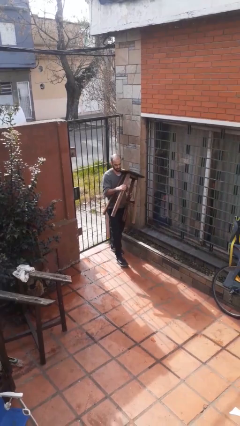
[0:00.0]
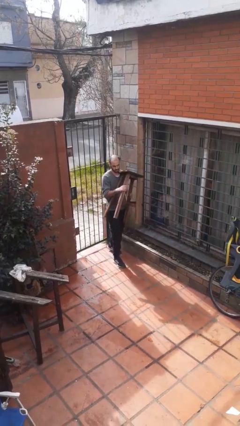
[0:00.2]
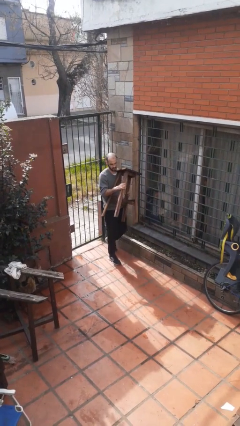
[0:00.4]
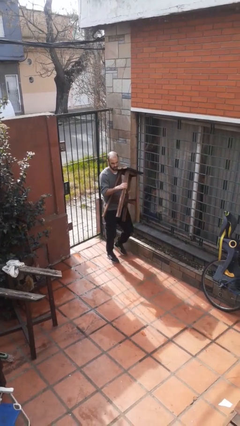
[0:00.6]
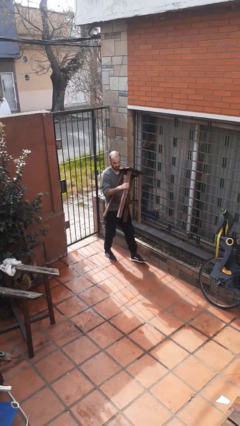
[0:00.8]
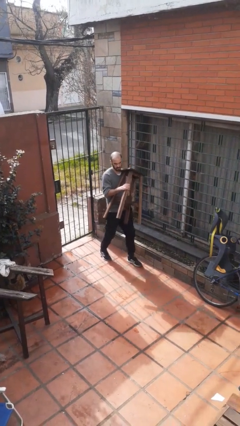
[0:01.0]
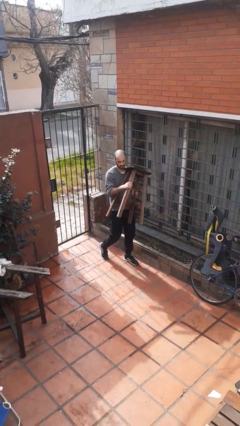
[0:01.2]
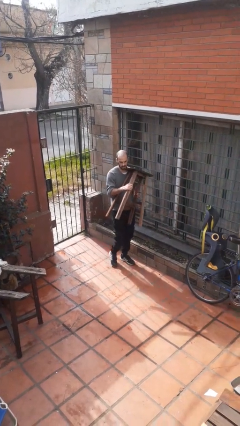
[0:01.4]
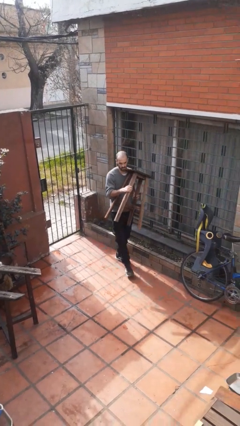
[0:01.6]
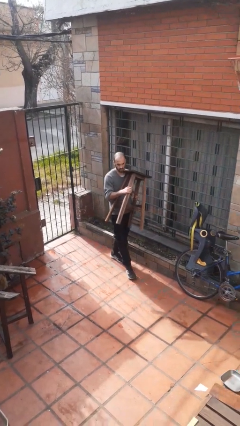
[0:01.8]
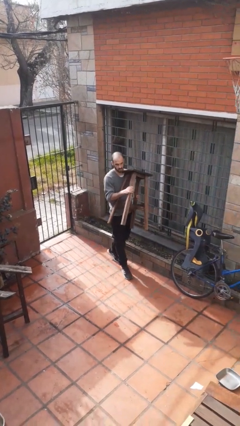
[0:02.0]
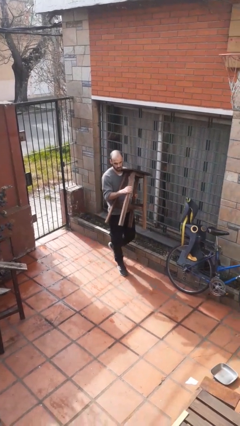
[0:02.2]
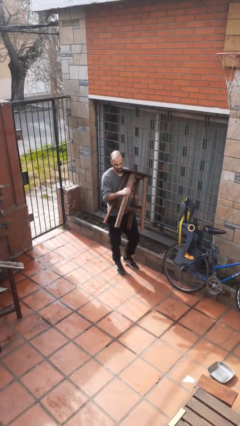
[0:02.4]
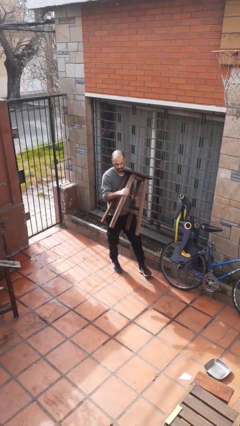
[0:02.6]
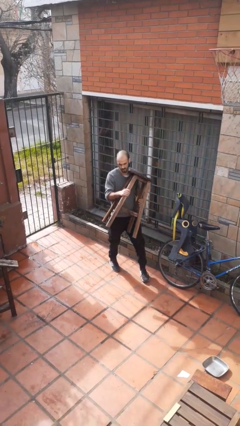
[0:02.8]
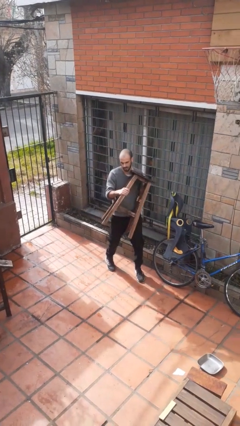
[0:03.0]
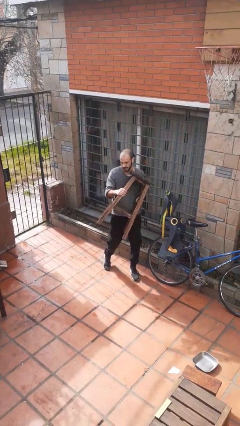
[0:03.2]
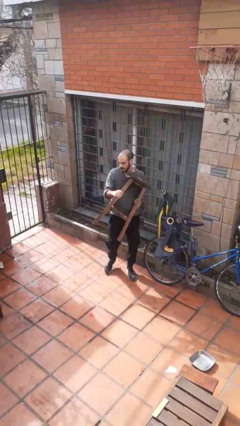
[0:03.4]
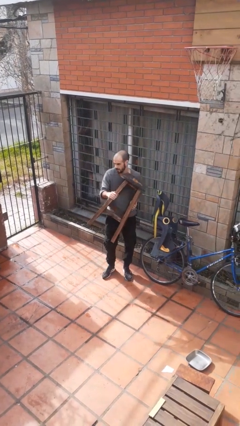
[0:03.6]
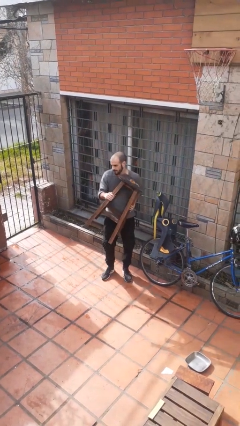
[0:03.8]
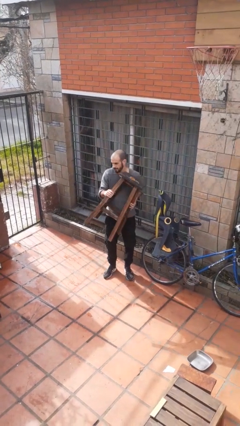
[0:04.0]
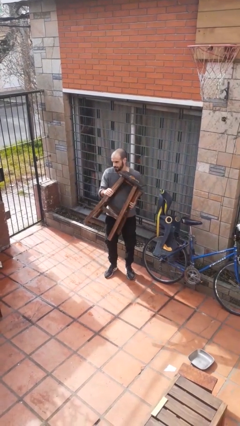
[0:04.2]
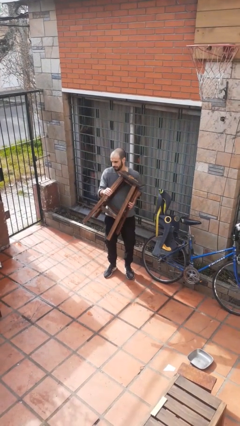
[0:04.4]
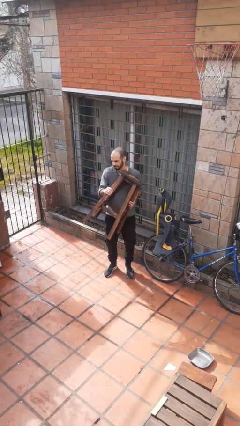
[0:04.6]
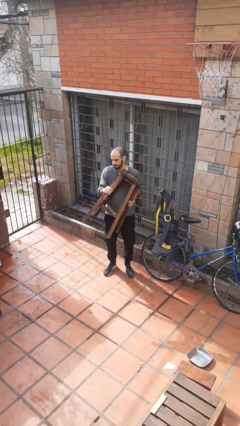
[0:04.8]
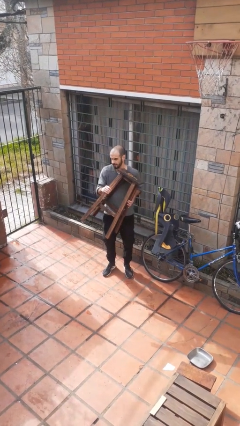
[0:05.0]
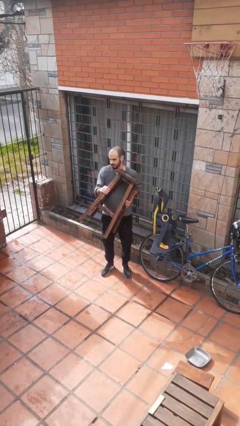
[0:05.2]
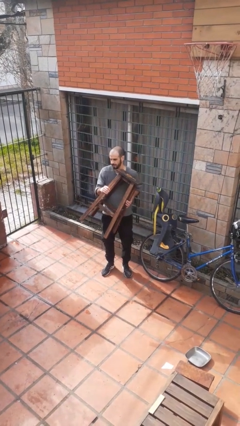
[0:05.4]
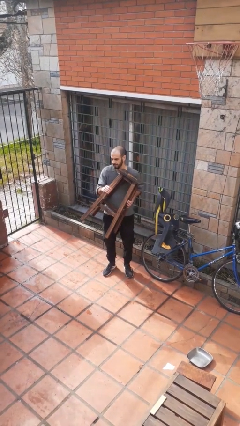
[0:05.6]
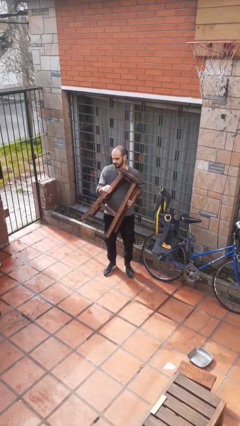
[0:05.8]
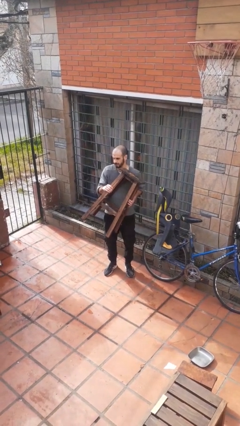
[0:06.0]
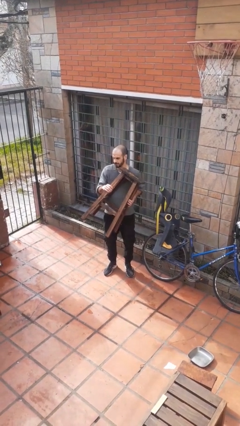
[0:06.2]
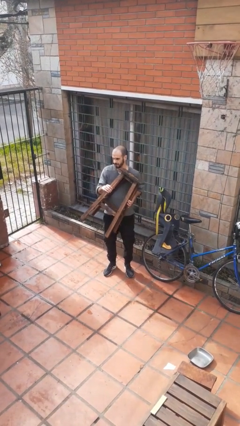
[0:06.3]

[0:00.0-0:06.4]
person carries furniture

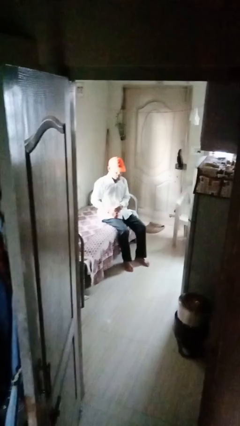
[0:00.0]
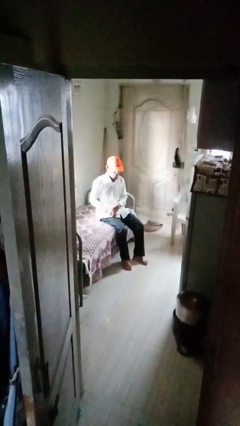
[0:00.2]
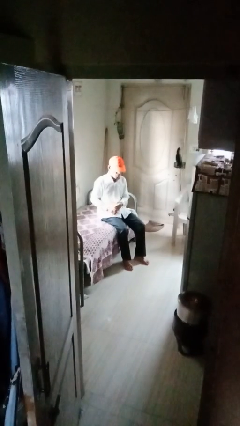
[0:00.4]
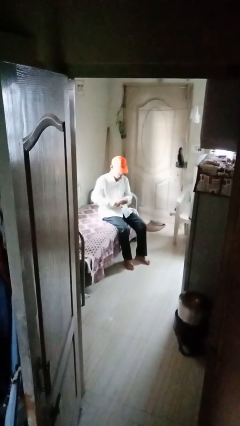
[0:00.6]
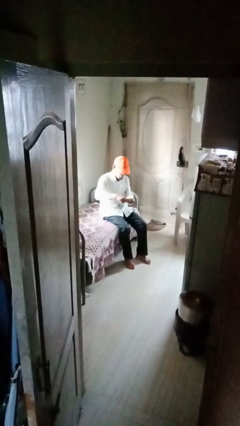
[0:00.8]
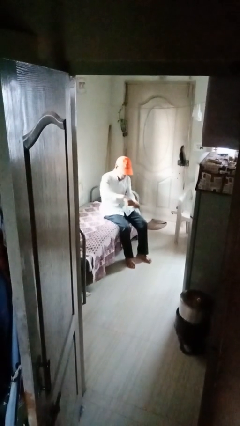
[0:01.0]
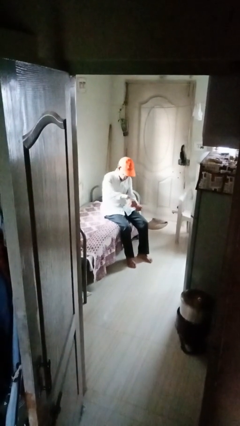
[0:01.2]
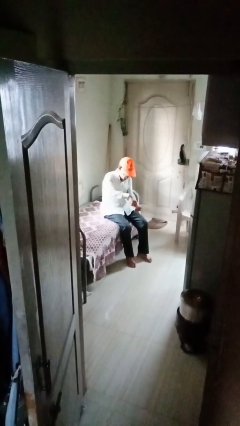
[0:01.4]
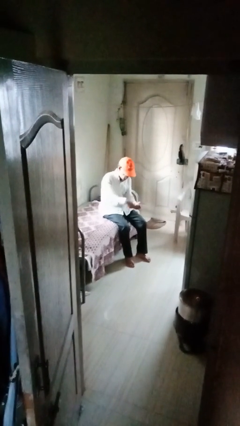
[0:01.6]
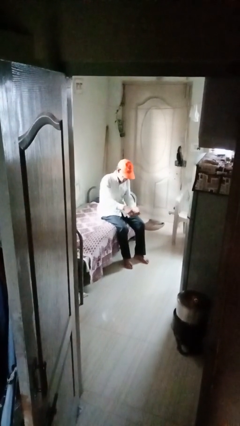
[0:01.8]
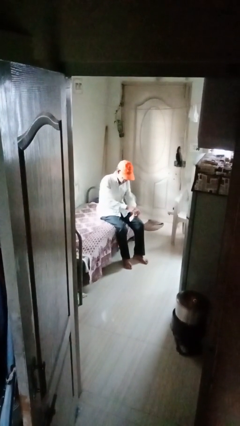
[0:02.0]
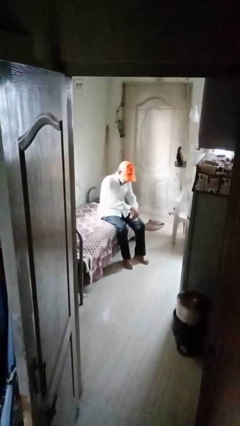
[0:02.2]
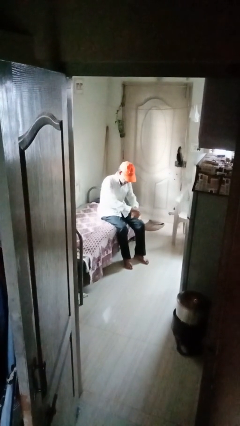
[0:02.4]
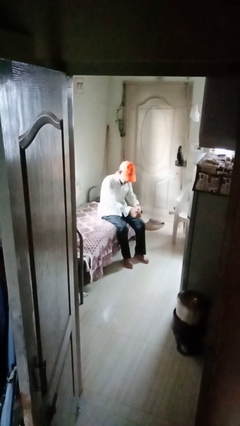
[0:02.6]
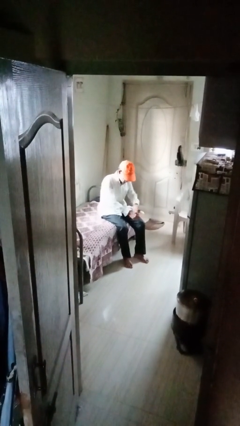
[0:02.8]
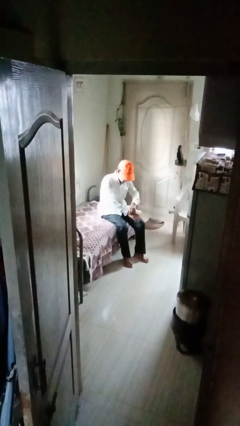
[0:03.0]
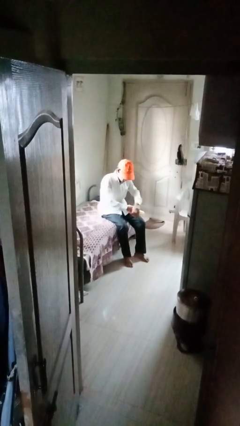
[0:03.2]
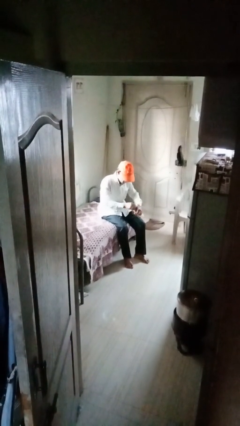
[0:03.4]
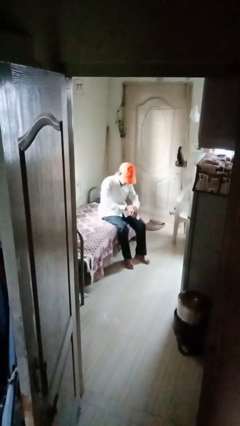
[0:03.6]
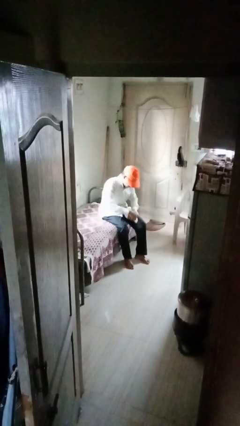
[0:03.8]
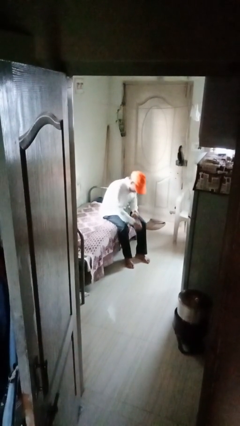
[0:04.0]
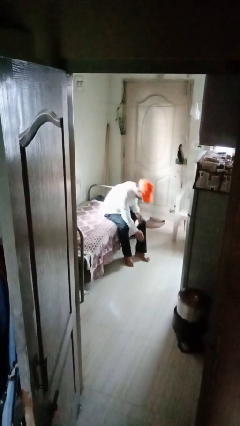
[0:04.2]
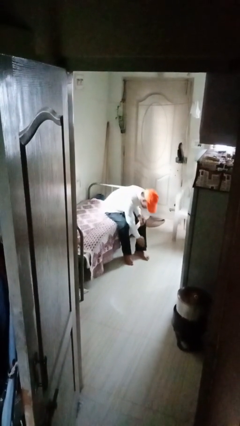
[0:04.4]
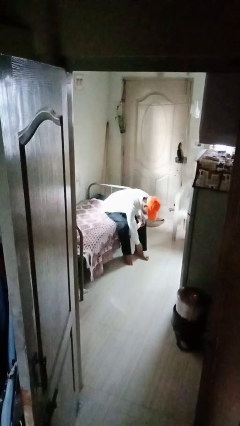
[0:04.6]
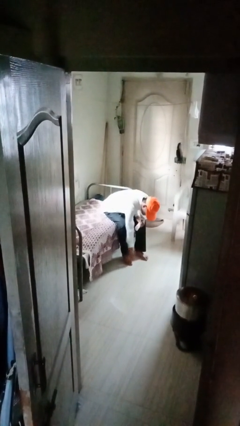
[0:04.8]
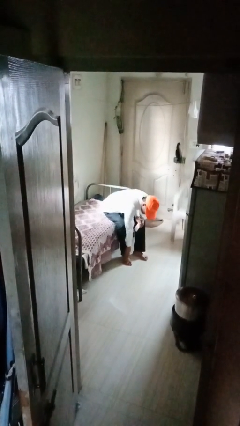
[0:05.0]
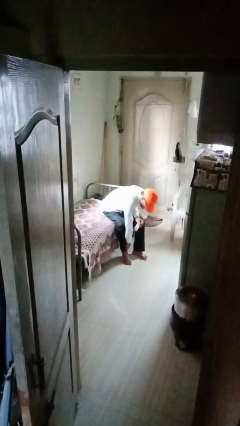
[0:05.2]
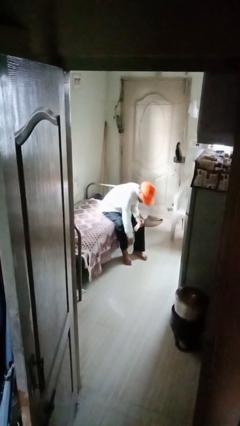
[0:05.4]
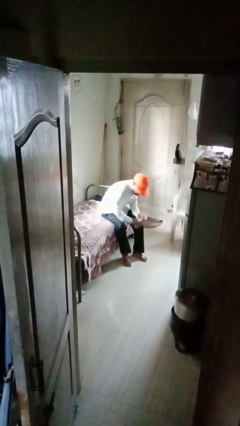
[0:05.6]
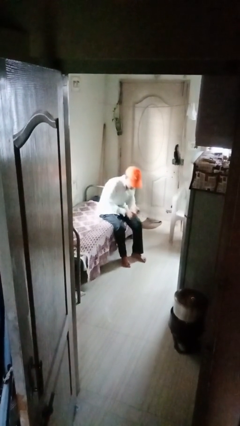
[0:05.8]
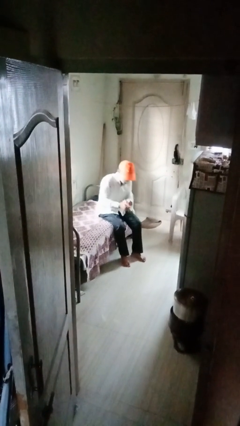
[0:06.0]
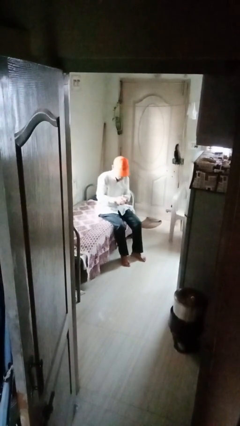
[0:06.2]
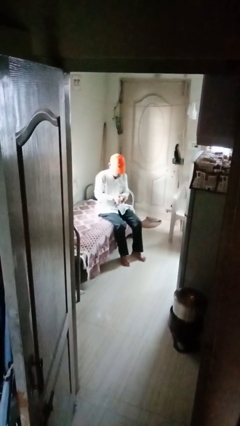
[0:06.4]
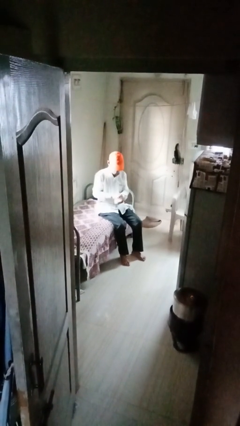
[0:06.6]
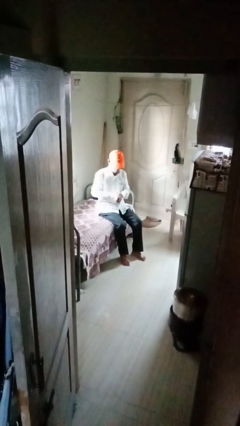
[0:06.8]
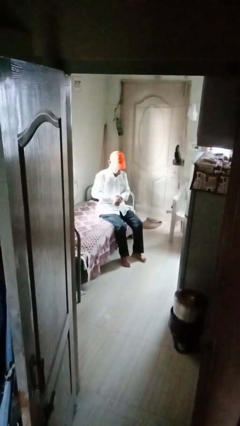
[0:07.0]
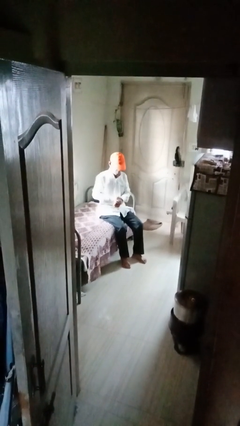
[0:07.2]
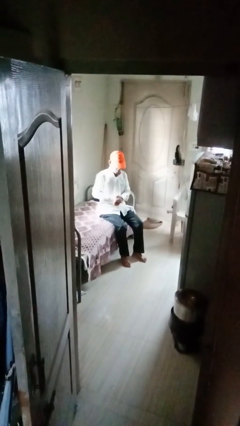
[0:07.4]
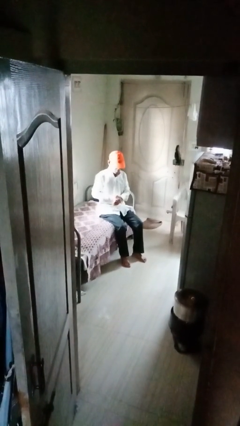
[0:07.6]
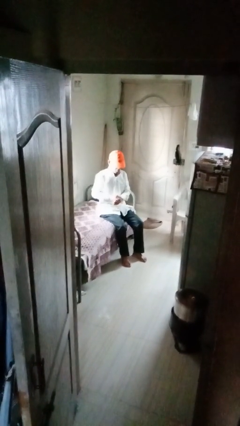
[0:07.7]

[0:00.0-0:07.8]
person applies facial moisturizer

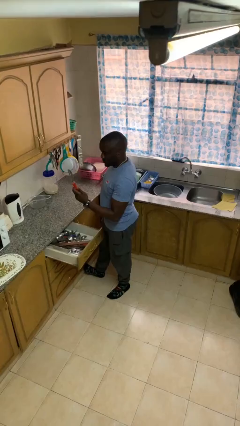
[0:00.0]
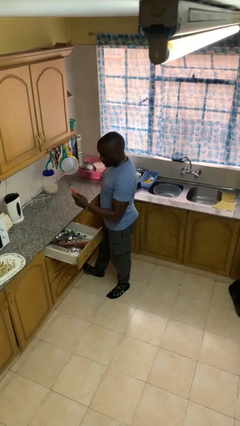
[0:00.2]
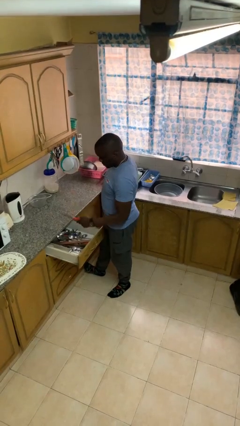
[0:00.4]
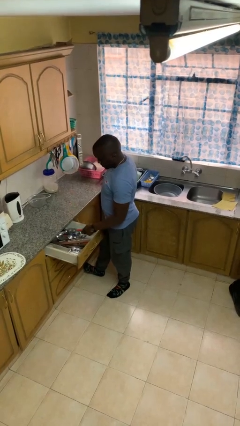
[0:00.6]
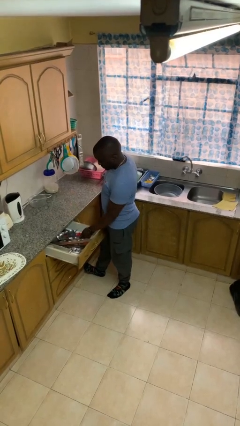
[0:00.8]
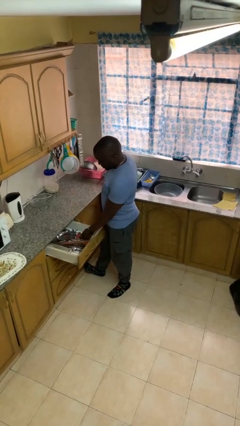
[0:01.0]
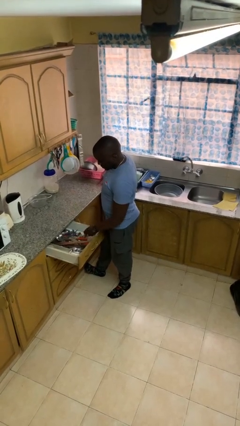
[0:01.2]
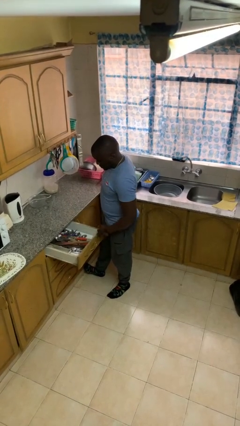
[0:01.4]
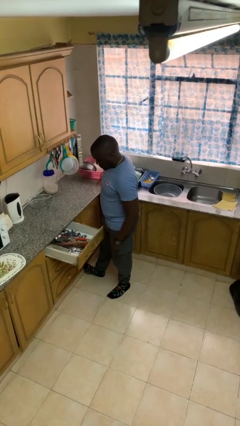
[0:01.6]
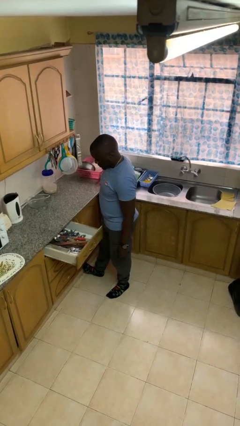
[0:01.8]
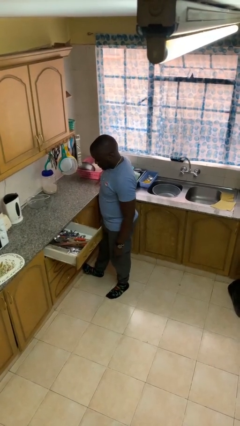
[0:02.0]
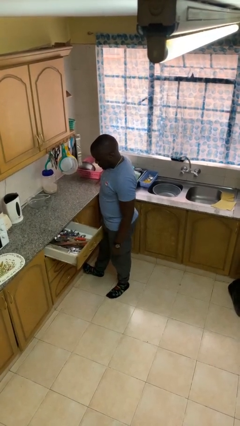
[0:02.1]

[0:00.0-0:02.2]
person puts object into kitchen drawer

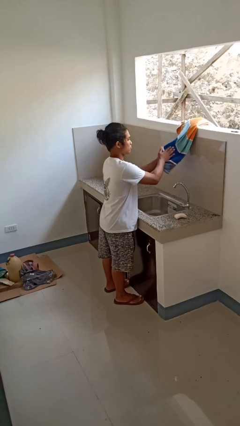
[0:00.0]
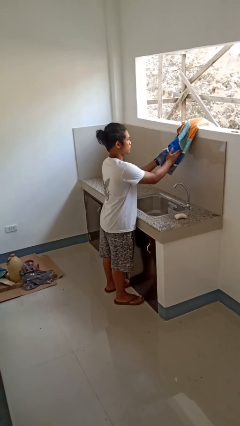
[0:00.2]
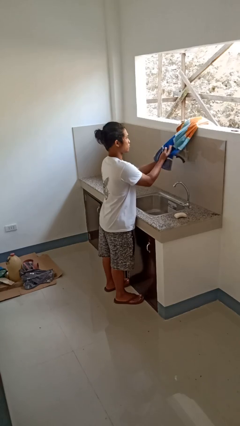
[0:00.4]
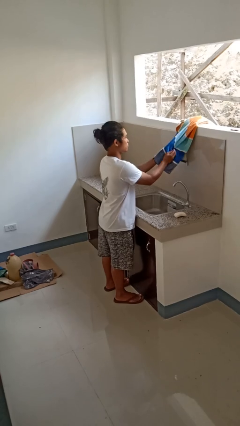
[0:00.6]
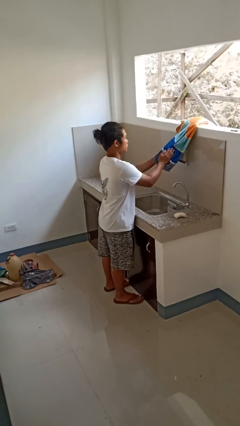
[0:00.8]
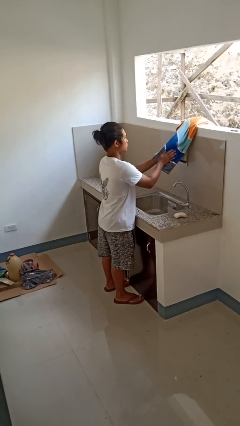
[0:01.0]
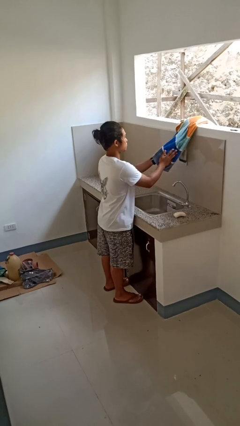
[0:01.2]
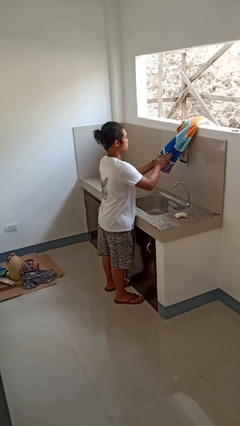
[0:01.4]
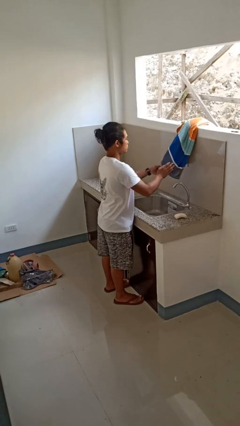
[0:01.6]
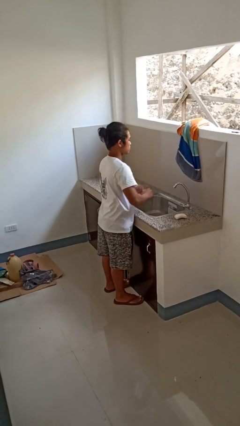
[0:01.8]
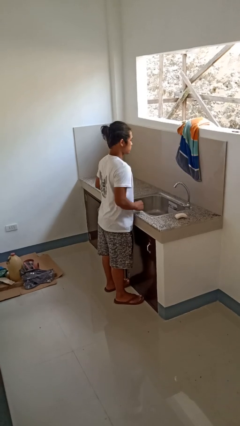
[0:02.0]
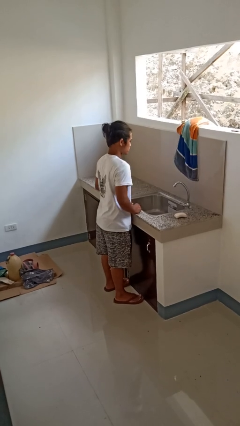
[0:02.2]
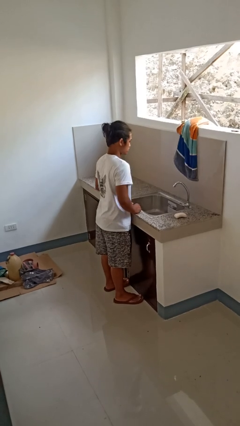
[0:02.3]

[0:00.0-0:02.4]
person dries hands with towel
